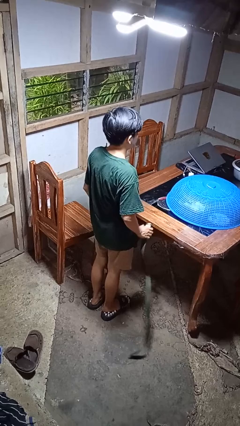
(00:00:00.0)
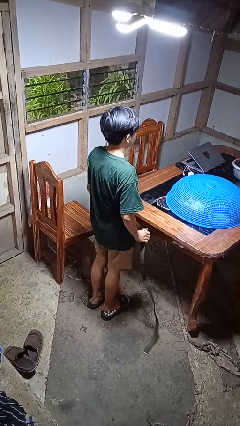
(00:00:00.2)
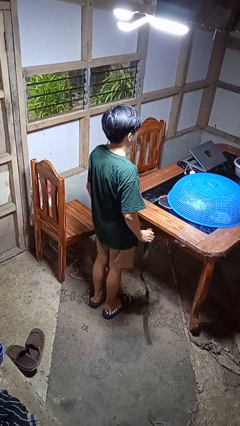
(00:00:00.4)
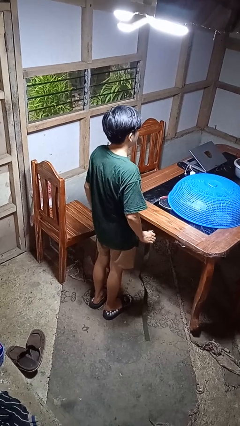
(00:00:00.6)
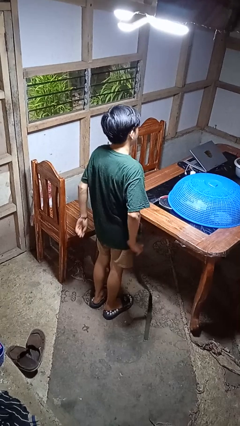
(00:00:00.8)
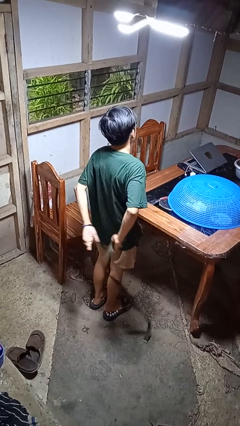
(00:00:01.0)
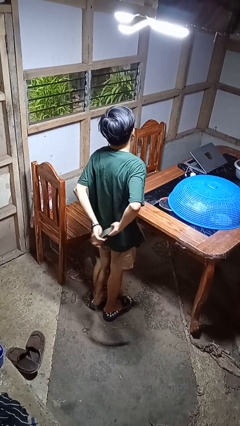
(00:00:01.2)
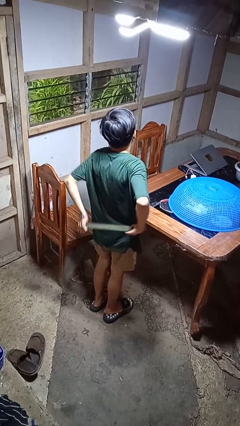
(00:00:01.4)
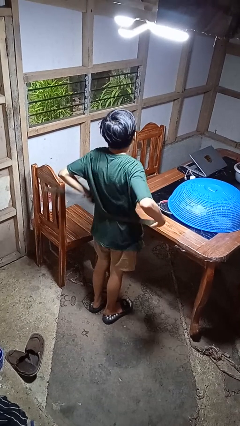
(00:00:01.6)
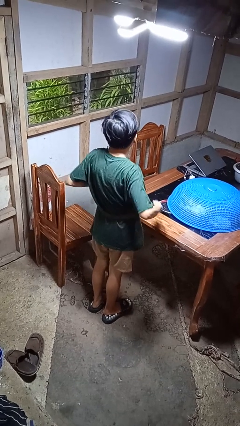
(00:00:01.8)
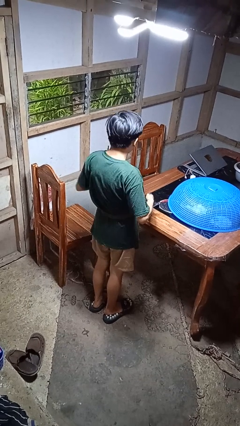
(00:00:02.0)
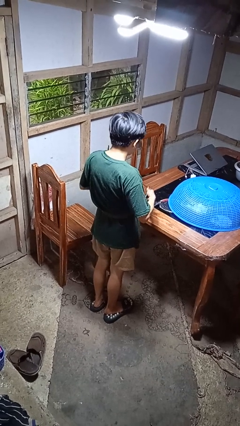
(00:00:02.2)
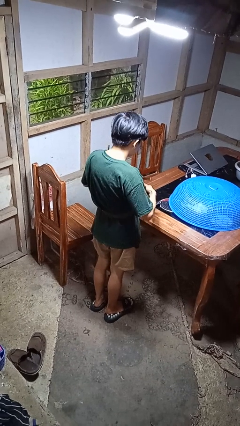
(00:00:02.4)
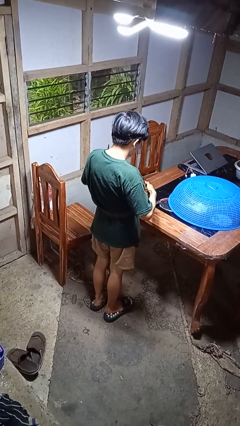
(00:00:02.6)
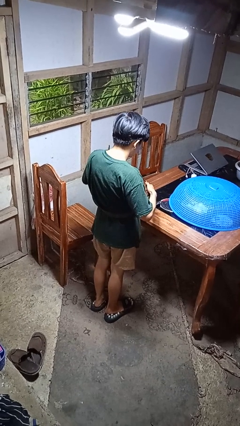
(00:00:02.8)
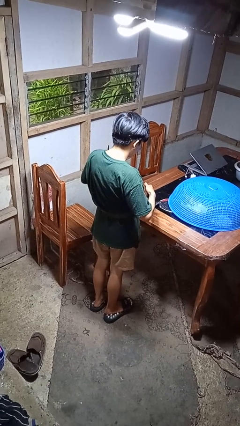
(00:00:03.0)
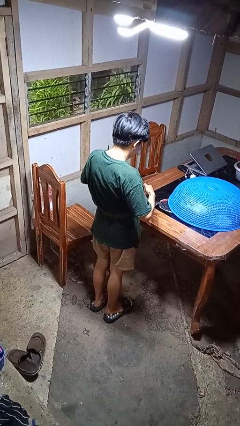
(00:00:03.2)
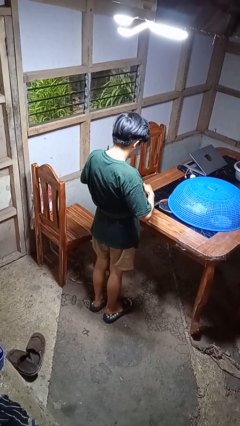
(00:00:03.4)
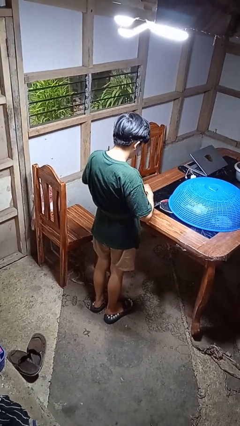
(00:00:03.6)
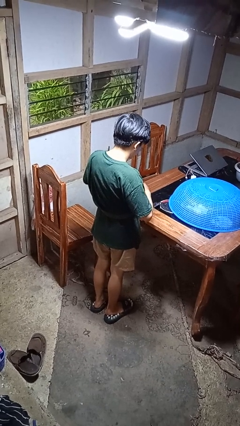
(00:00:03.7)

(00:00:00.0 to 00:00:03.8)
person puts on belt

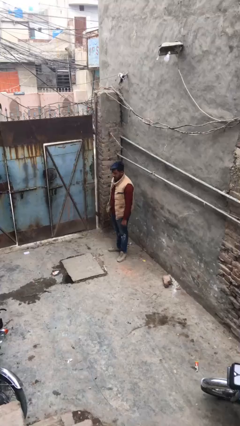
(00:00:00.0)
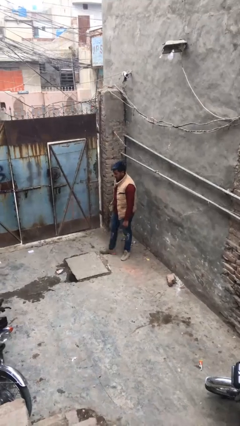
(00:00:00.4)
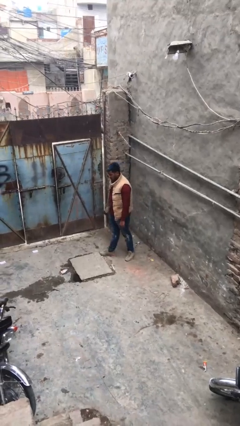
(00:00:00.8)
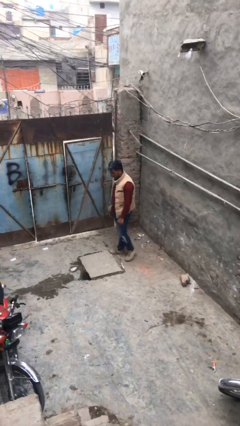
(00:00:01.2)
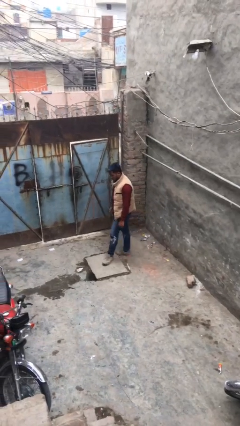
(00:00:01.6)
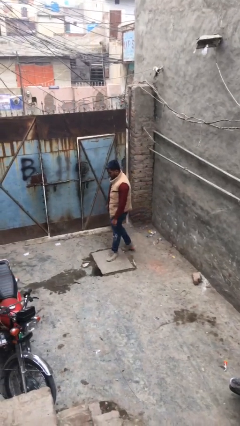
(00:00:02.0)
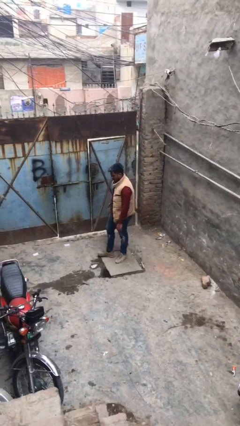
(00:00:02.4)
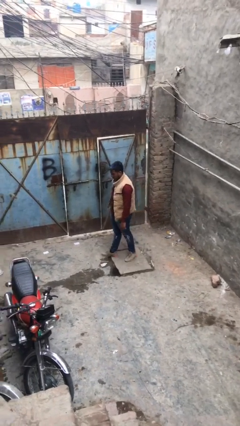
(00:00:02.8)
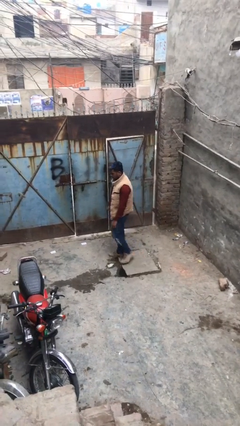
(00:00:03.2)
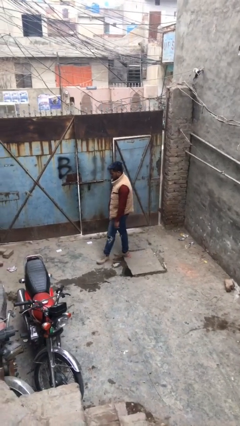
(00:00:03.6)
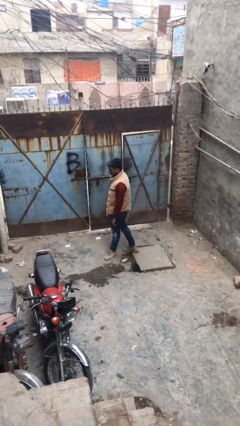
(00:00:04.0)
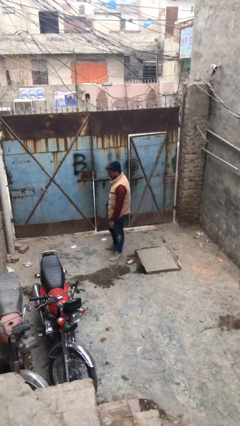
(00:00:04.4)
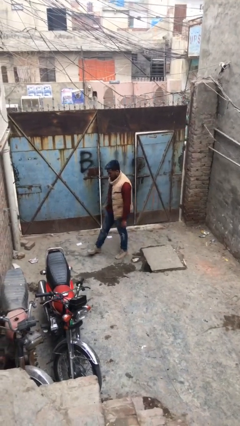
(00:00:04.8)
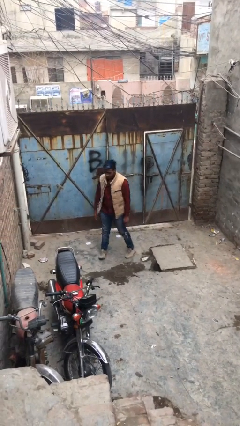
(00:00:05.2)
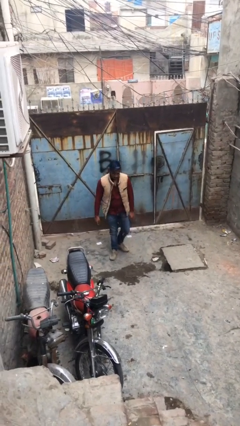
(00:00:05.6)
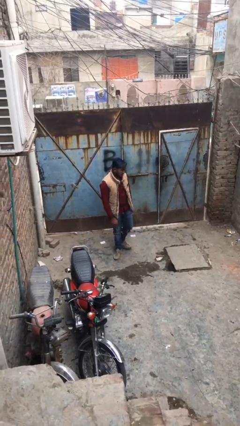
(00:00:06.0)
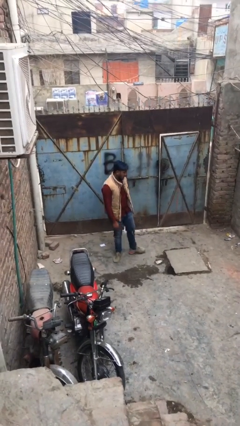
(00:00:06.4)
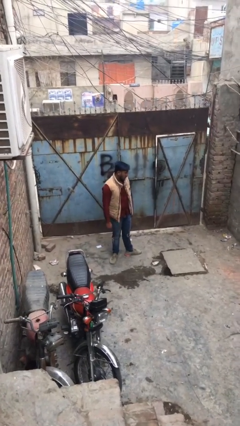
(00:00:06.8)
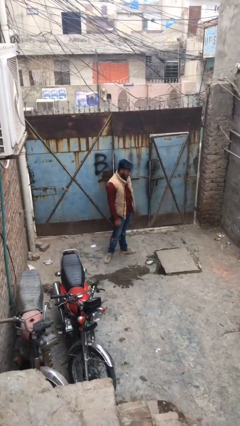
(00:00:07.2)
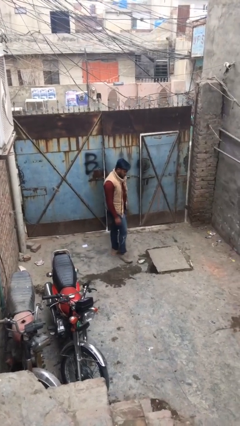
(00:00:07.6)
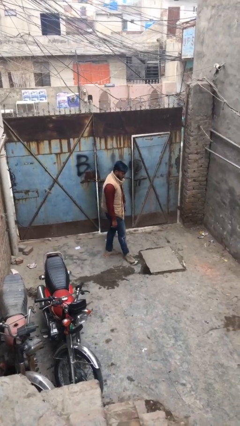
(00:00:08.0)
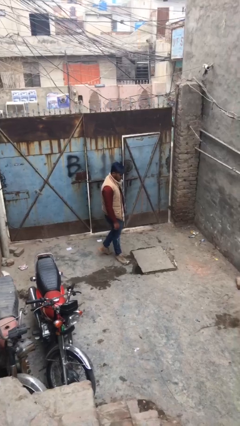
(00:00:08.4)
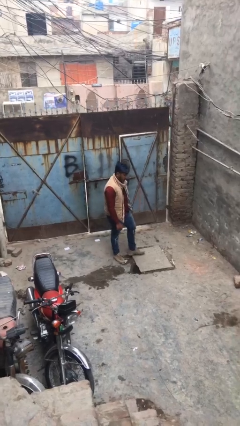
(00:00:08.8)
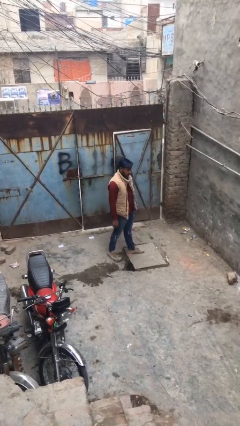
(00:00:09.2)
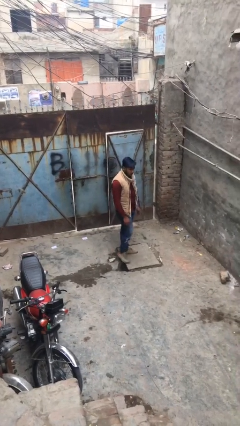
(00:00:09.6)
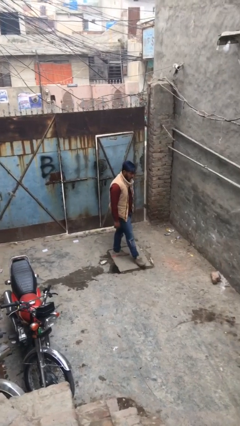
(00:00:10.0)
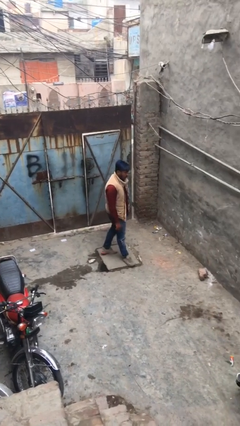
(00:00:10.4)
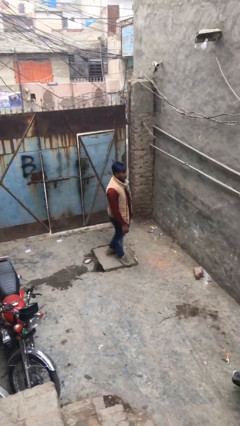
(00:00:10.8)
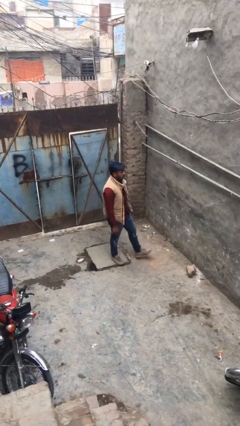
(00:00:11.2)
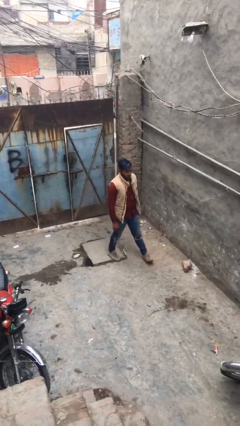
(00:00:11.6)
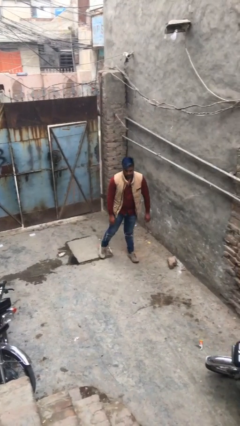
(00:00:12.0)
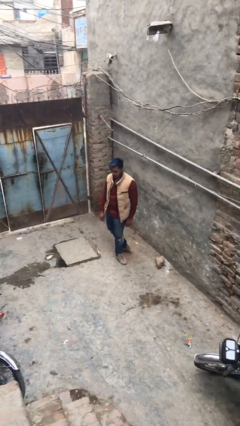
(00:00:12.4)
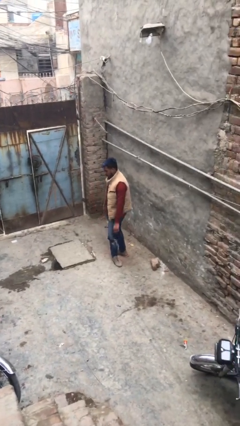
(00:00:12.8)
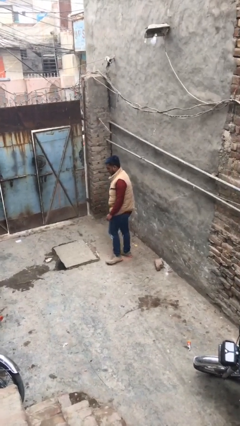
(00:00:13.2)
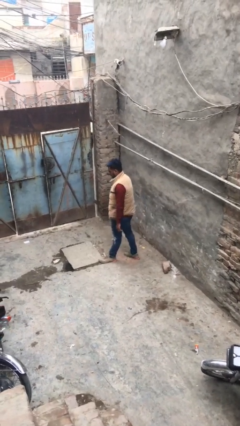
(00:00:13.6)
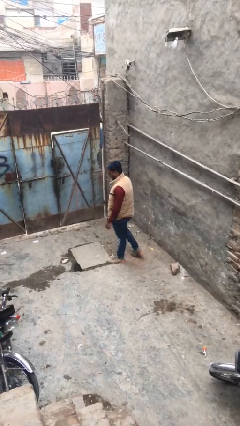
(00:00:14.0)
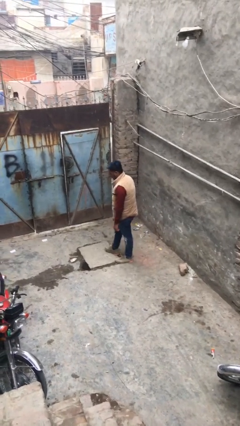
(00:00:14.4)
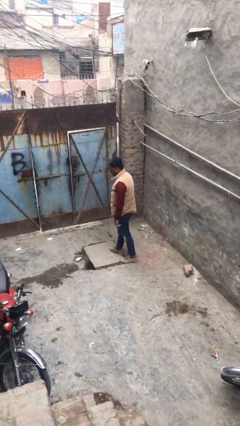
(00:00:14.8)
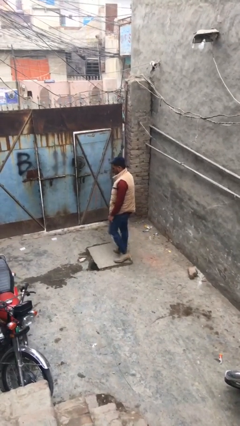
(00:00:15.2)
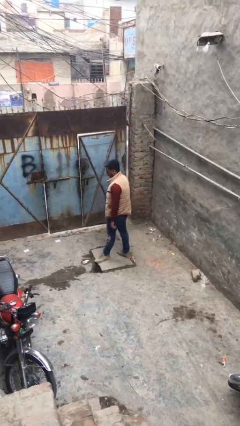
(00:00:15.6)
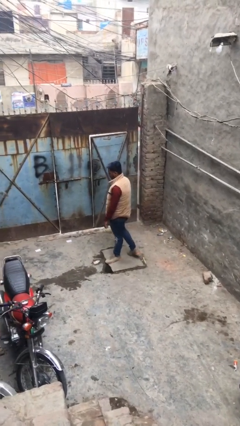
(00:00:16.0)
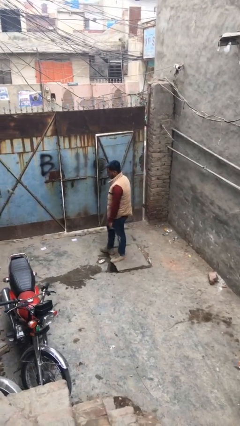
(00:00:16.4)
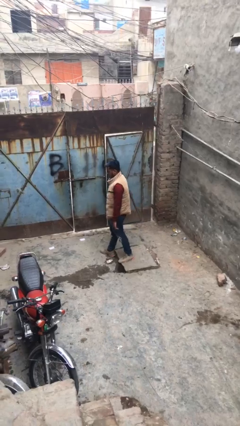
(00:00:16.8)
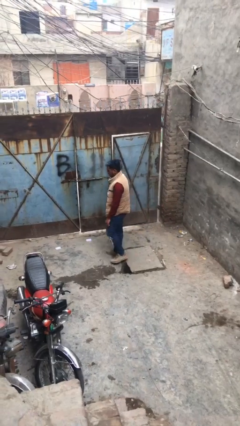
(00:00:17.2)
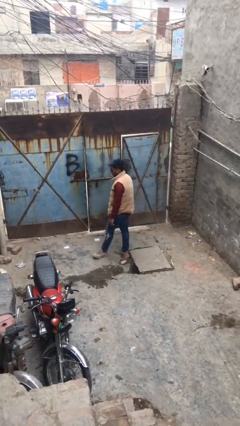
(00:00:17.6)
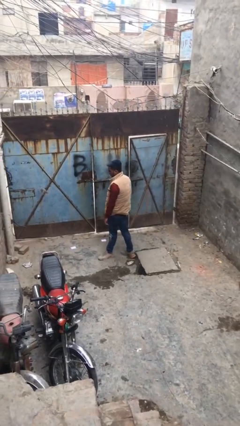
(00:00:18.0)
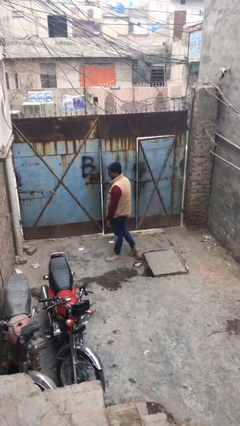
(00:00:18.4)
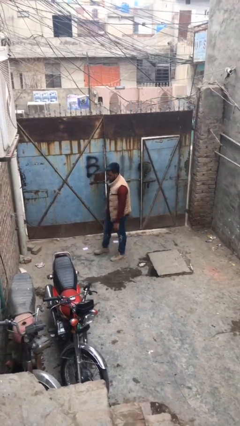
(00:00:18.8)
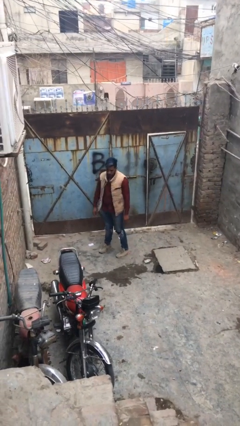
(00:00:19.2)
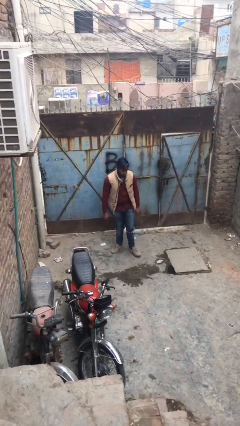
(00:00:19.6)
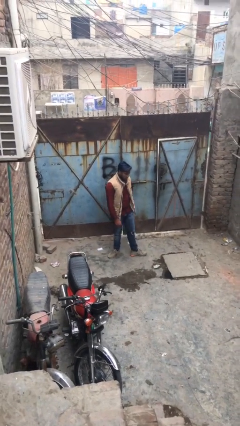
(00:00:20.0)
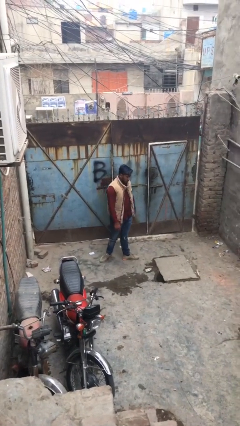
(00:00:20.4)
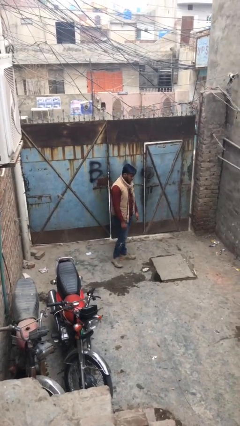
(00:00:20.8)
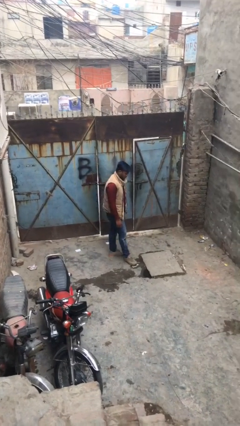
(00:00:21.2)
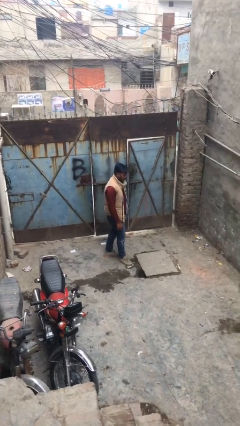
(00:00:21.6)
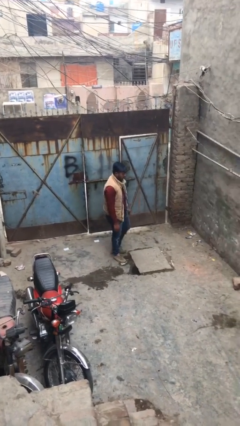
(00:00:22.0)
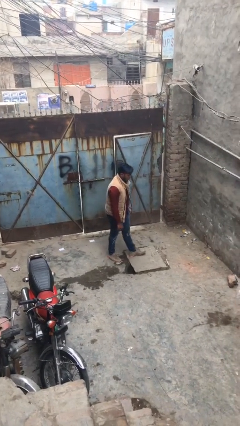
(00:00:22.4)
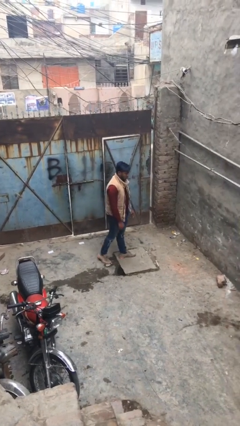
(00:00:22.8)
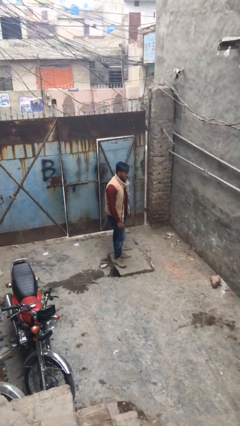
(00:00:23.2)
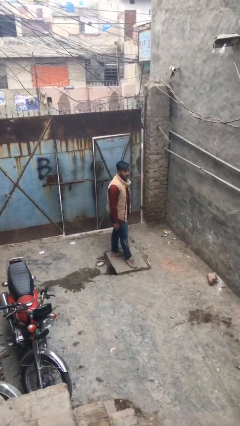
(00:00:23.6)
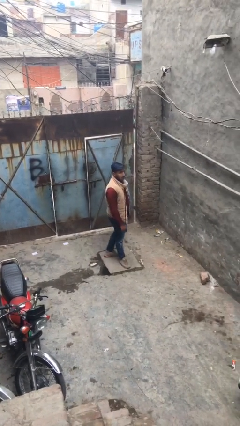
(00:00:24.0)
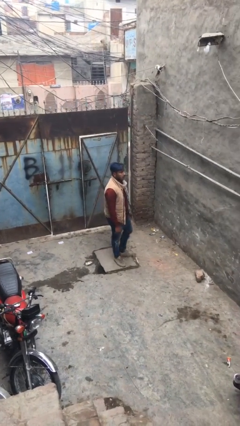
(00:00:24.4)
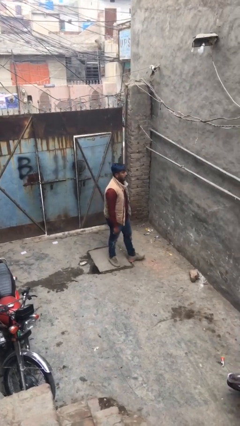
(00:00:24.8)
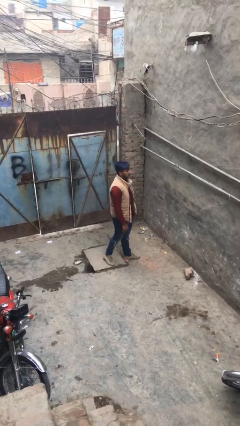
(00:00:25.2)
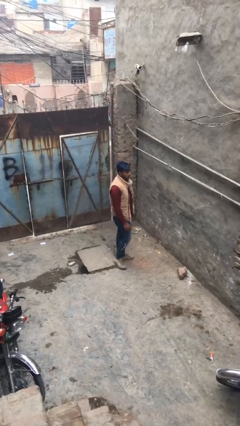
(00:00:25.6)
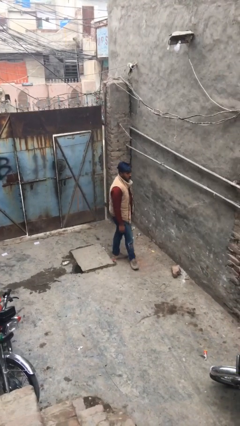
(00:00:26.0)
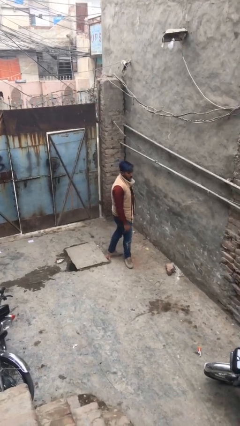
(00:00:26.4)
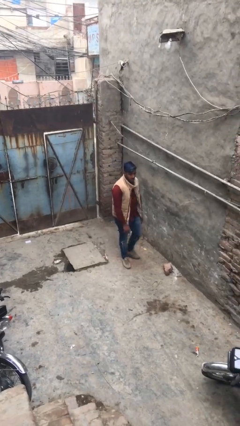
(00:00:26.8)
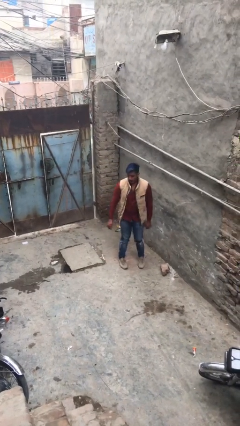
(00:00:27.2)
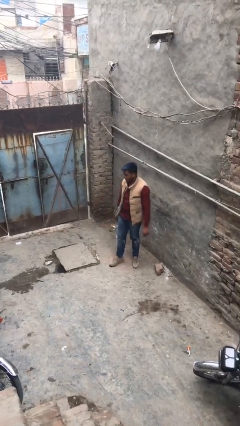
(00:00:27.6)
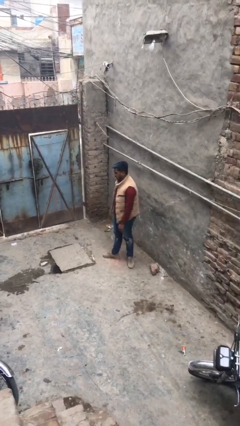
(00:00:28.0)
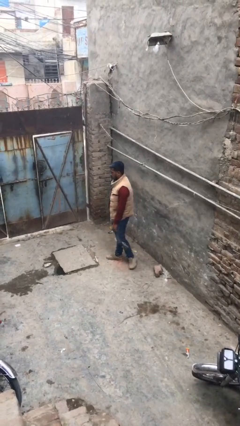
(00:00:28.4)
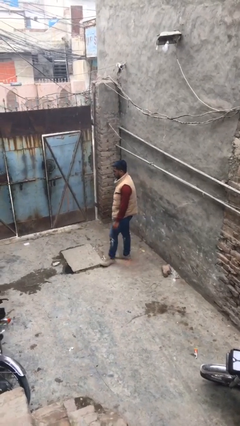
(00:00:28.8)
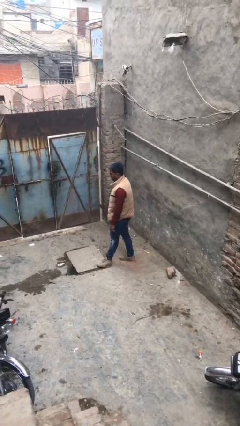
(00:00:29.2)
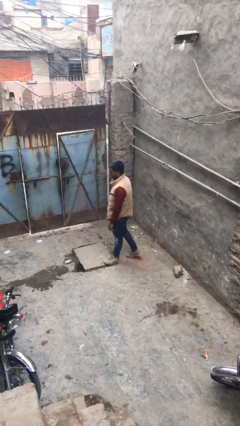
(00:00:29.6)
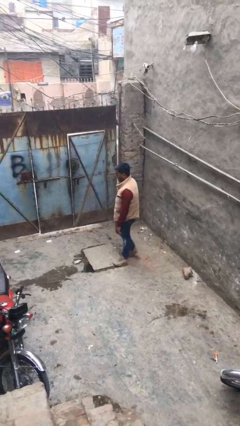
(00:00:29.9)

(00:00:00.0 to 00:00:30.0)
person walks
